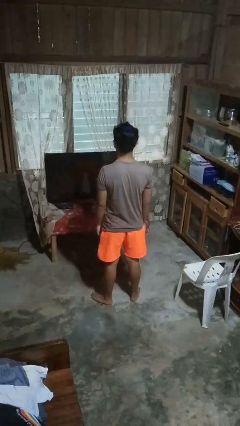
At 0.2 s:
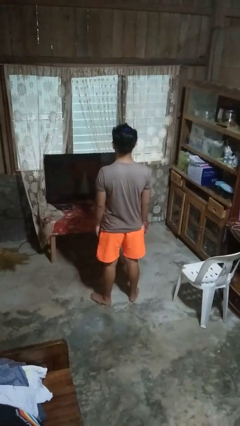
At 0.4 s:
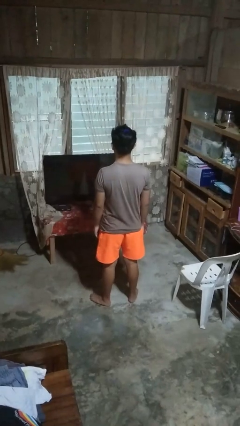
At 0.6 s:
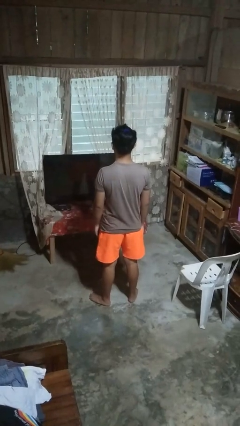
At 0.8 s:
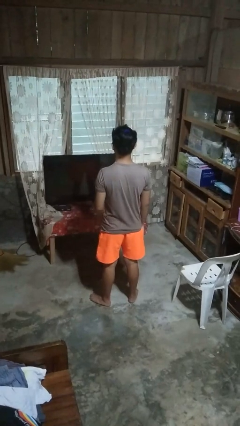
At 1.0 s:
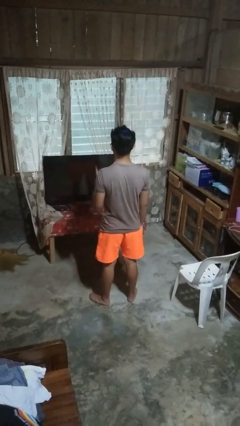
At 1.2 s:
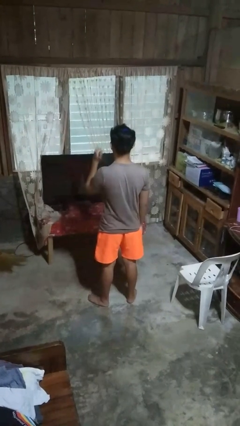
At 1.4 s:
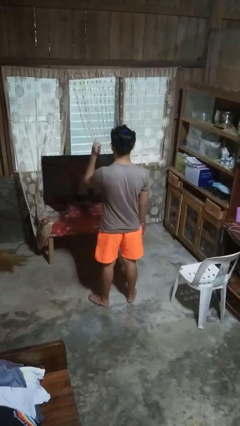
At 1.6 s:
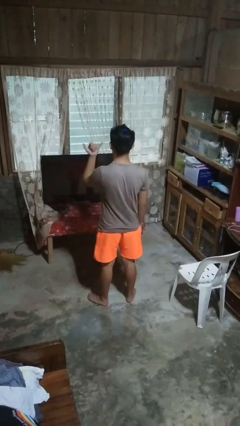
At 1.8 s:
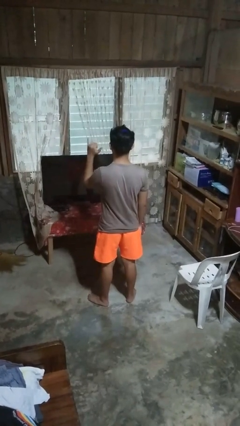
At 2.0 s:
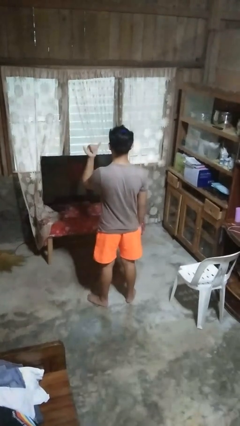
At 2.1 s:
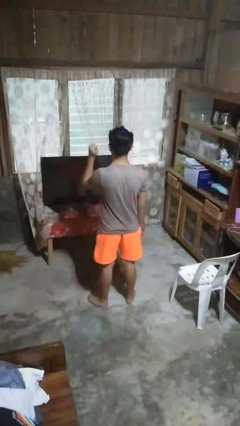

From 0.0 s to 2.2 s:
person gestures hang loose

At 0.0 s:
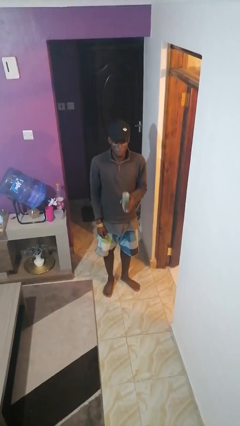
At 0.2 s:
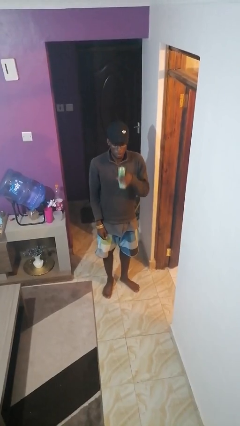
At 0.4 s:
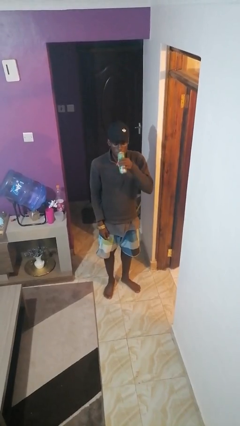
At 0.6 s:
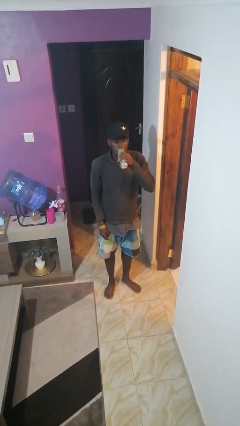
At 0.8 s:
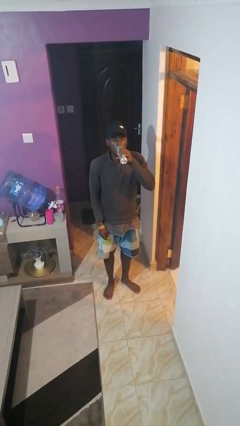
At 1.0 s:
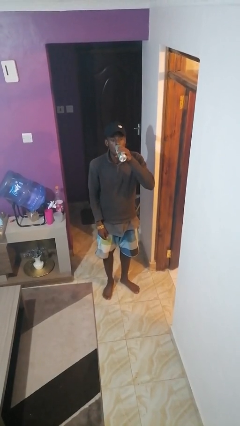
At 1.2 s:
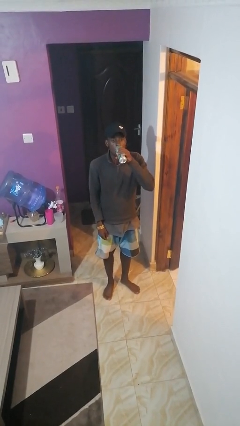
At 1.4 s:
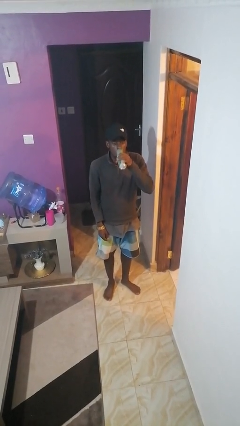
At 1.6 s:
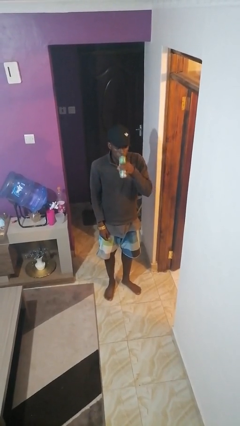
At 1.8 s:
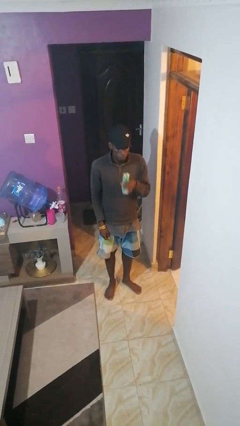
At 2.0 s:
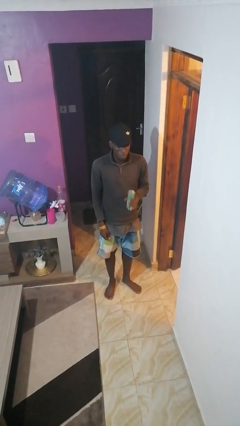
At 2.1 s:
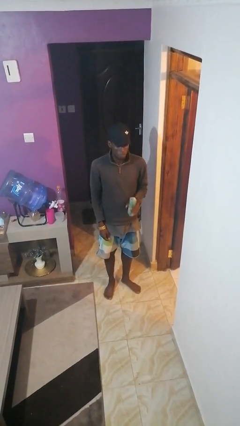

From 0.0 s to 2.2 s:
person drinks from beverage can

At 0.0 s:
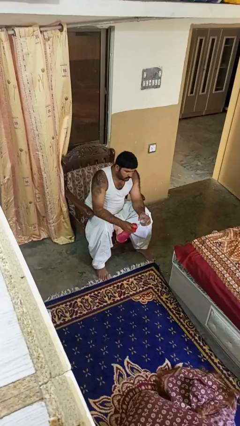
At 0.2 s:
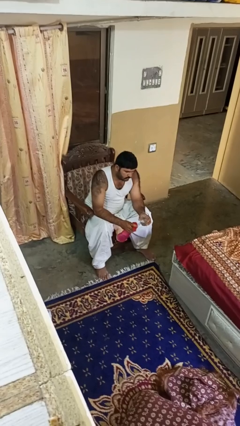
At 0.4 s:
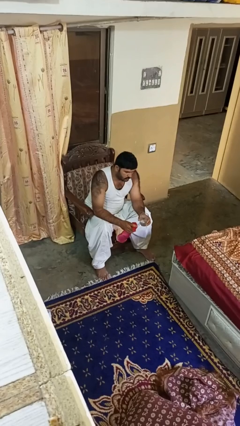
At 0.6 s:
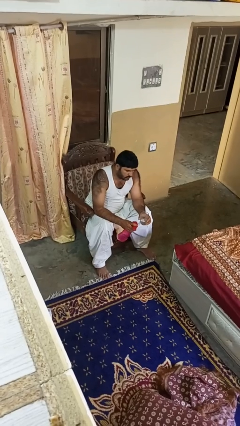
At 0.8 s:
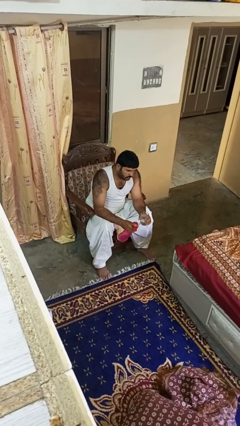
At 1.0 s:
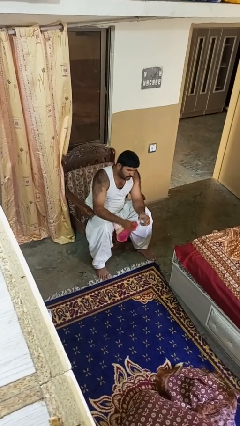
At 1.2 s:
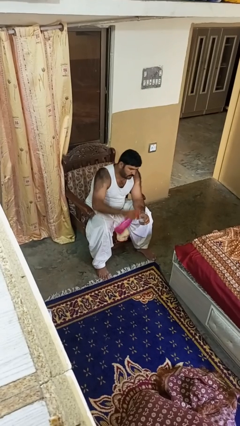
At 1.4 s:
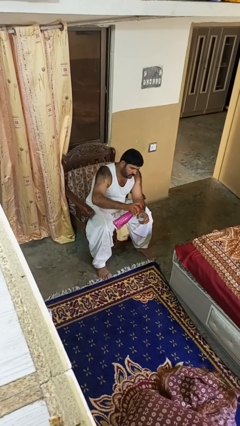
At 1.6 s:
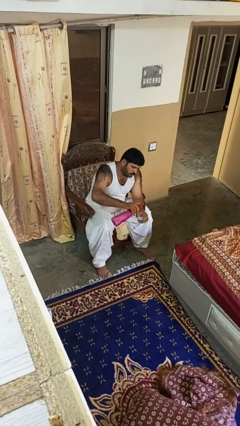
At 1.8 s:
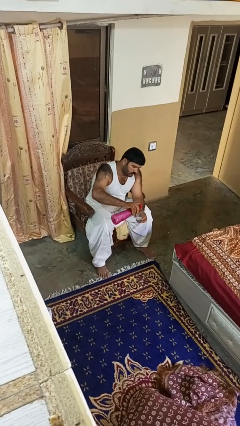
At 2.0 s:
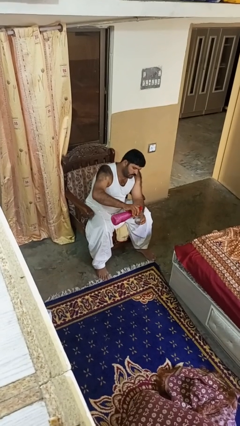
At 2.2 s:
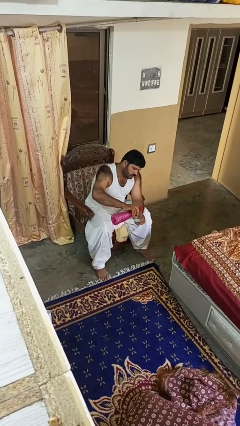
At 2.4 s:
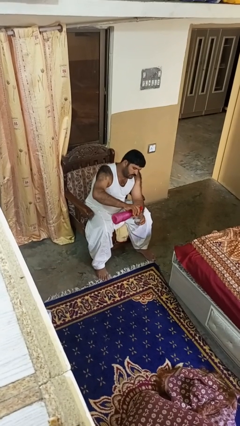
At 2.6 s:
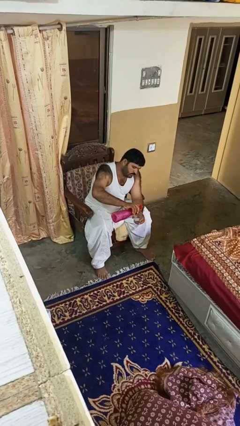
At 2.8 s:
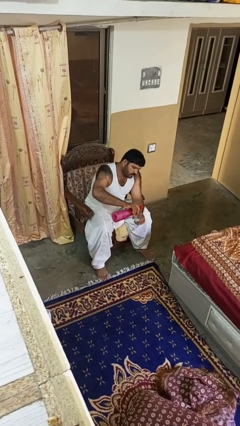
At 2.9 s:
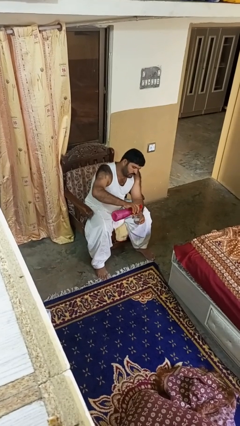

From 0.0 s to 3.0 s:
person pours liquid into cup

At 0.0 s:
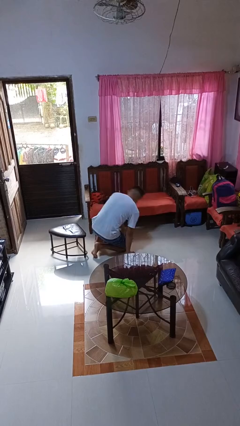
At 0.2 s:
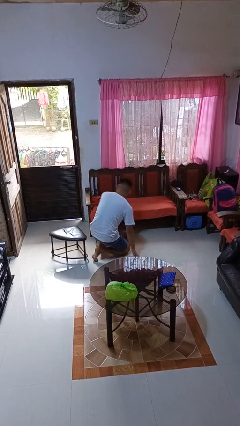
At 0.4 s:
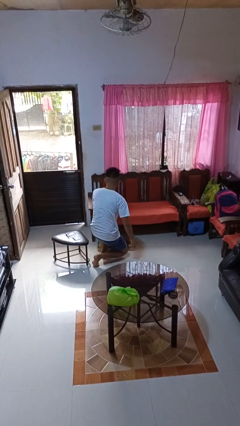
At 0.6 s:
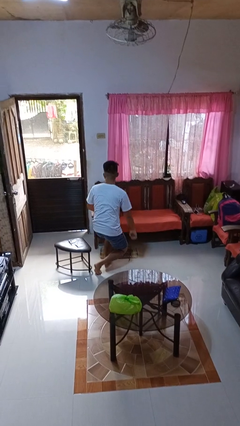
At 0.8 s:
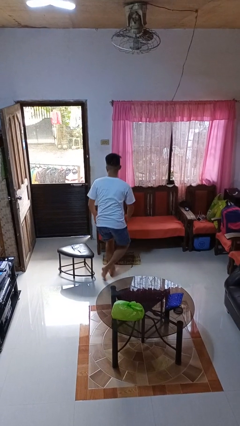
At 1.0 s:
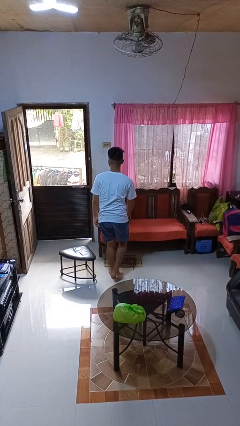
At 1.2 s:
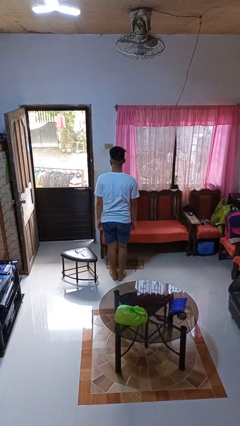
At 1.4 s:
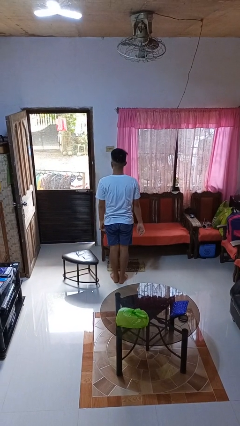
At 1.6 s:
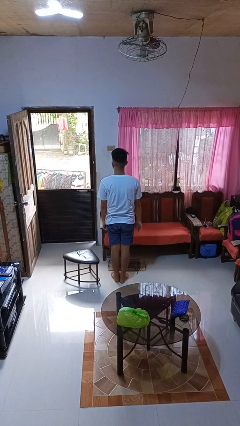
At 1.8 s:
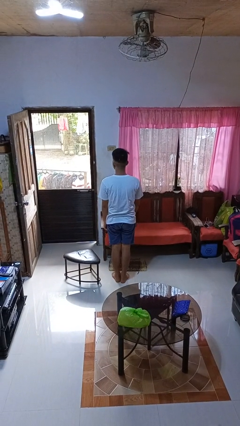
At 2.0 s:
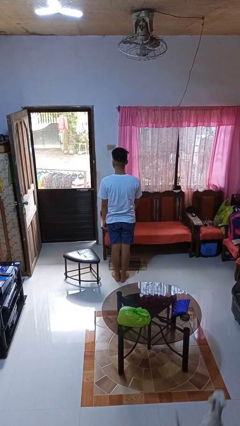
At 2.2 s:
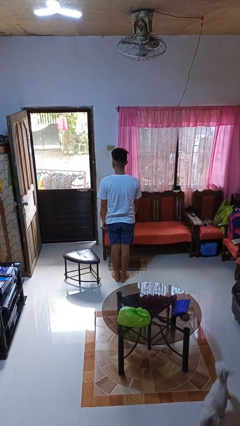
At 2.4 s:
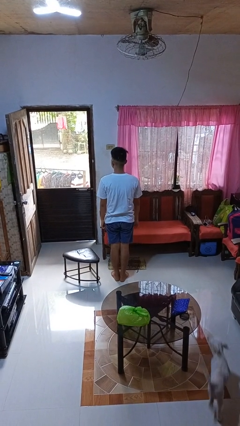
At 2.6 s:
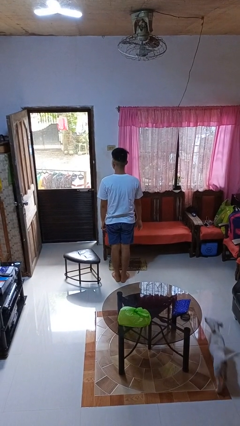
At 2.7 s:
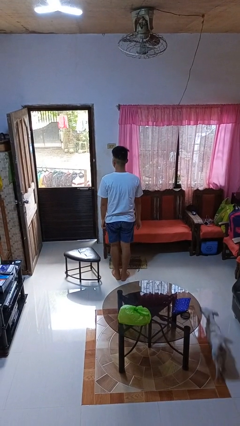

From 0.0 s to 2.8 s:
person stands up from floor

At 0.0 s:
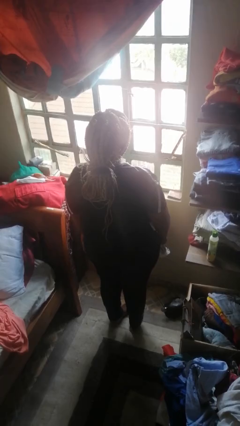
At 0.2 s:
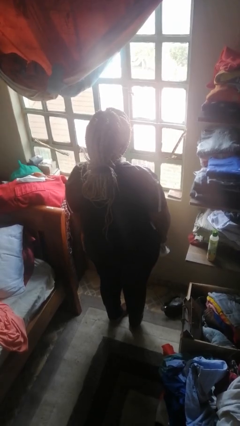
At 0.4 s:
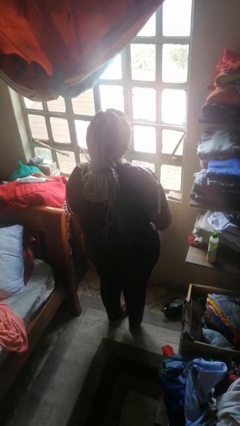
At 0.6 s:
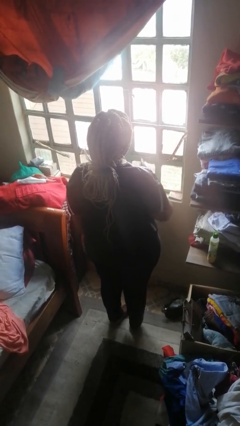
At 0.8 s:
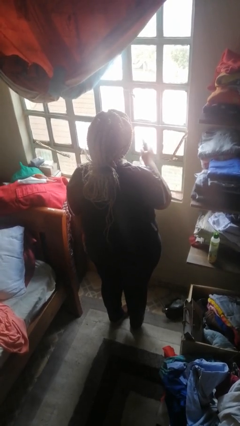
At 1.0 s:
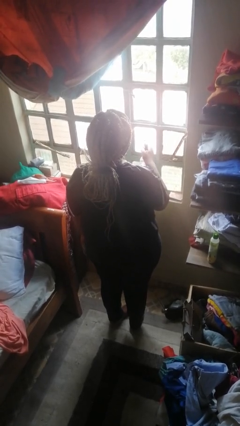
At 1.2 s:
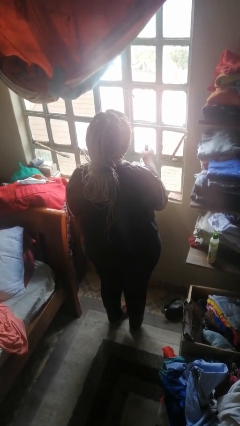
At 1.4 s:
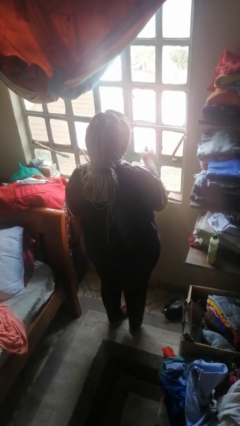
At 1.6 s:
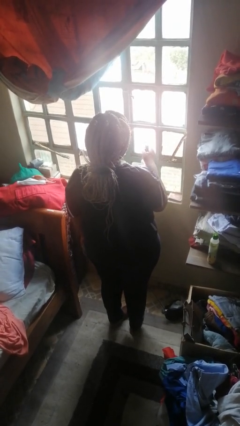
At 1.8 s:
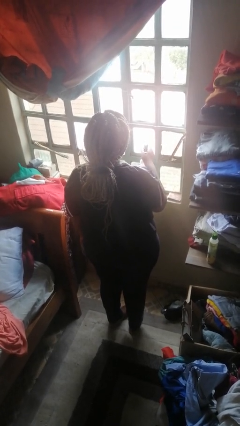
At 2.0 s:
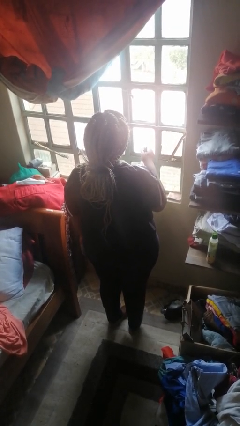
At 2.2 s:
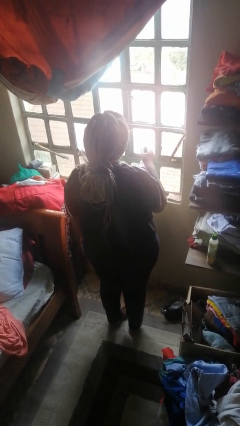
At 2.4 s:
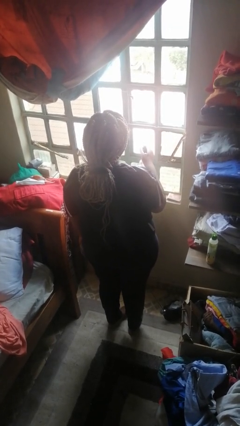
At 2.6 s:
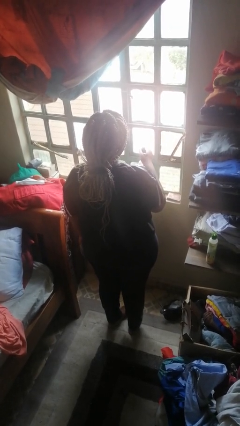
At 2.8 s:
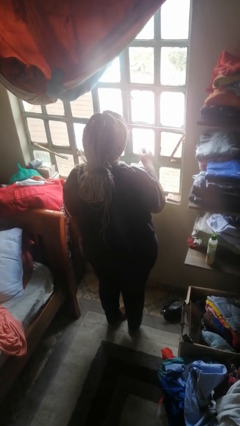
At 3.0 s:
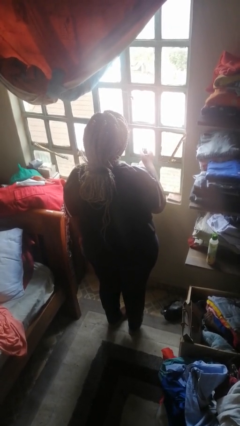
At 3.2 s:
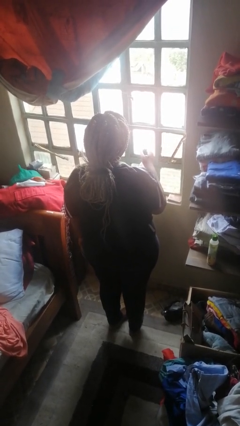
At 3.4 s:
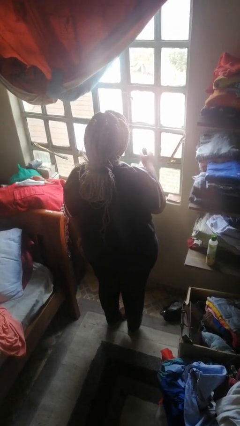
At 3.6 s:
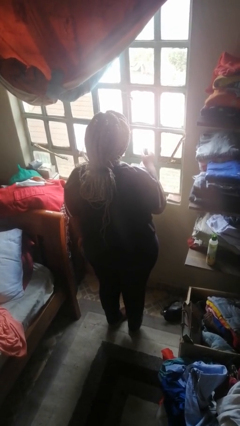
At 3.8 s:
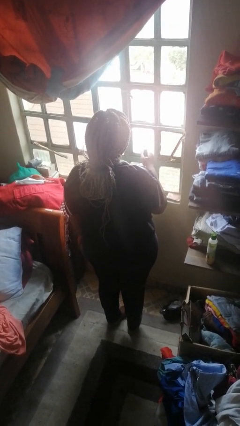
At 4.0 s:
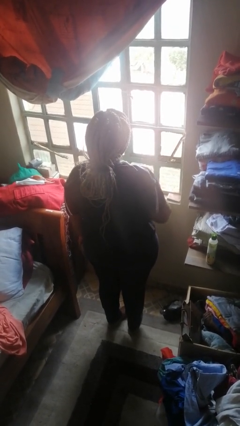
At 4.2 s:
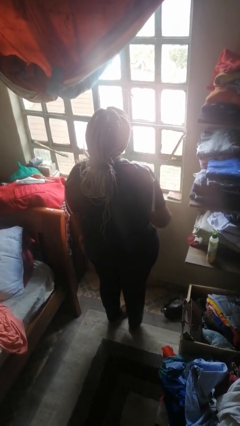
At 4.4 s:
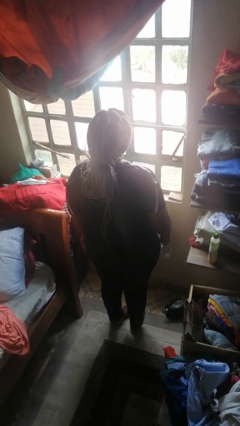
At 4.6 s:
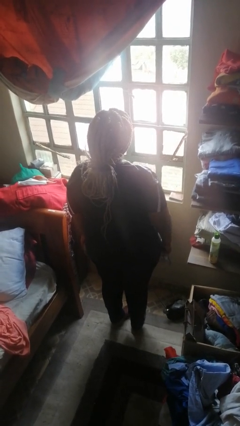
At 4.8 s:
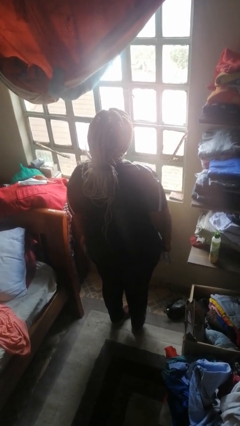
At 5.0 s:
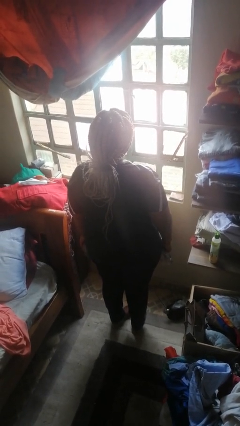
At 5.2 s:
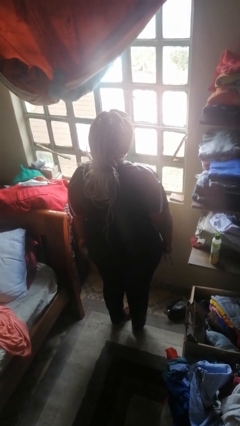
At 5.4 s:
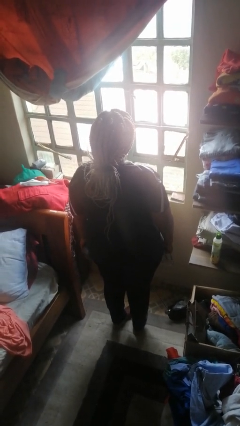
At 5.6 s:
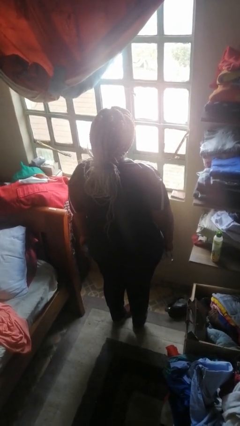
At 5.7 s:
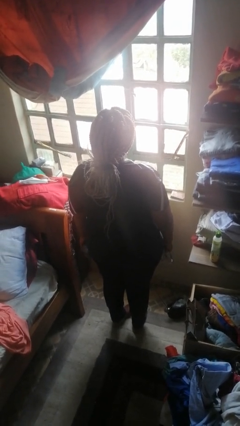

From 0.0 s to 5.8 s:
person sprays from bottle

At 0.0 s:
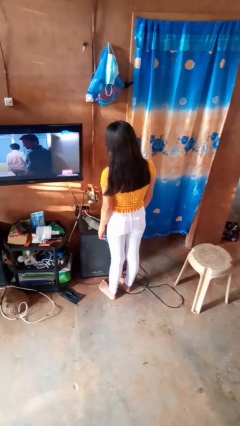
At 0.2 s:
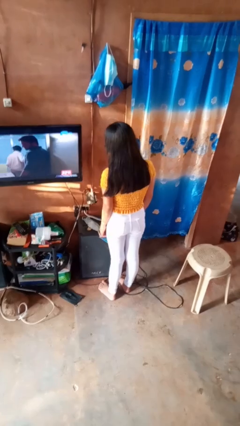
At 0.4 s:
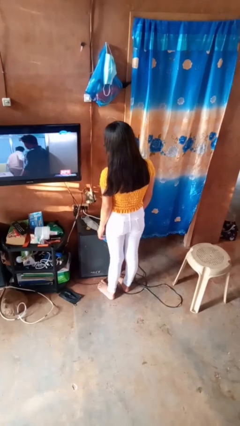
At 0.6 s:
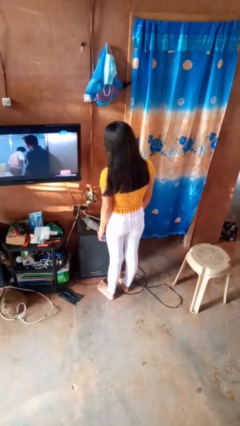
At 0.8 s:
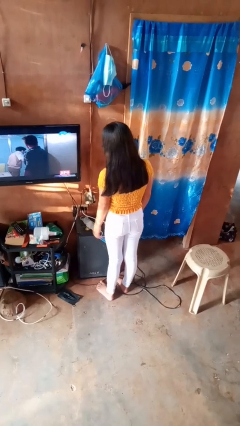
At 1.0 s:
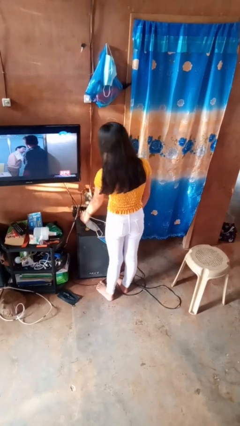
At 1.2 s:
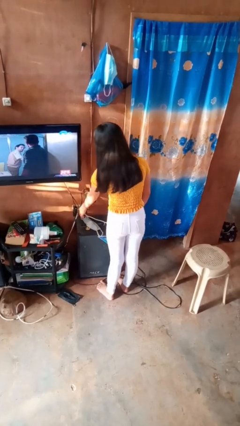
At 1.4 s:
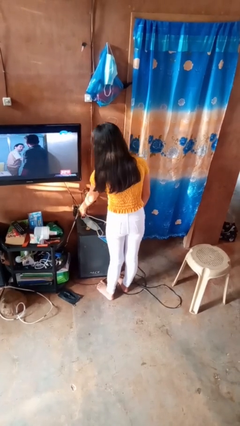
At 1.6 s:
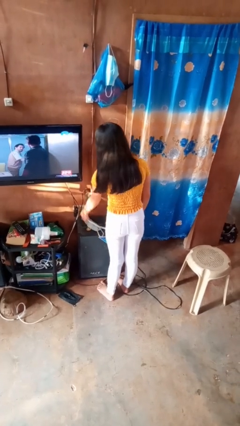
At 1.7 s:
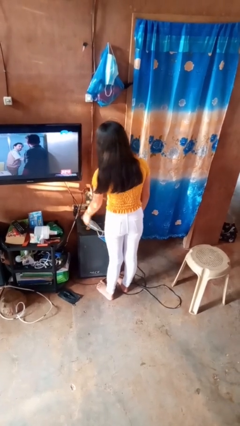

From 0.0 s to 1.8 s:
person unplugs from electrical socket
